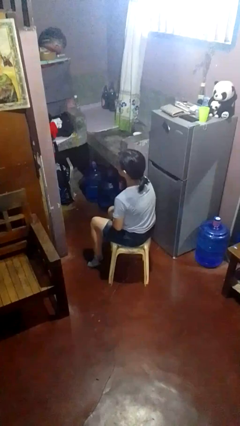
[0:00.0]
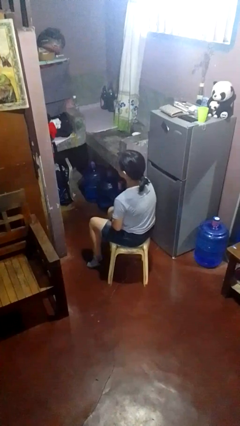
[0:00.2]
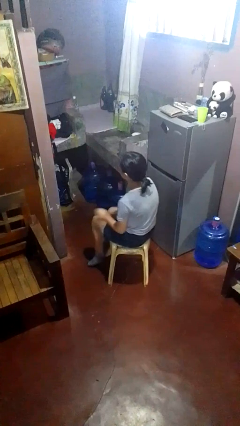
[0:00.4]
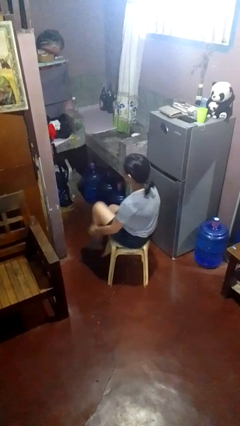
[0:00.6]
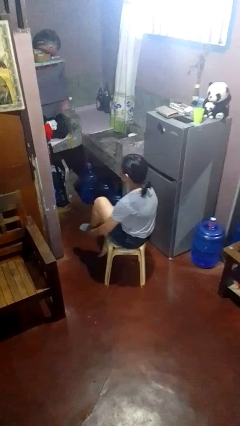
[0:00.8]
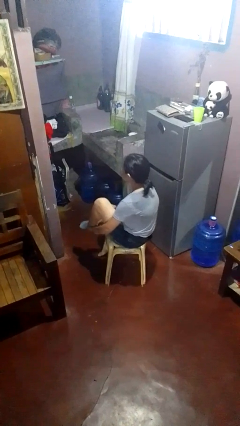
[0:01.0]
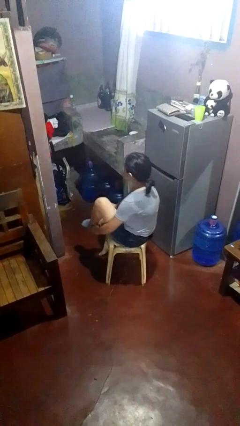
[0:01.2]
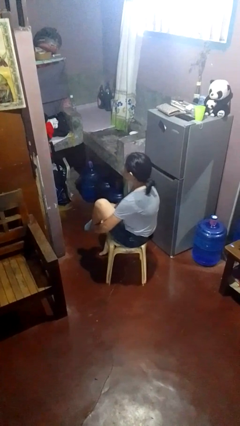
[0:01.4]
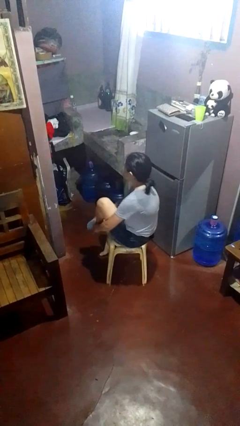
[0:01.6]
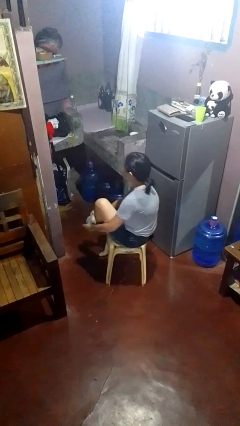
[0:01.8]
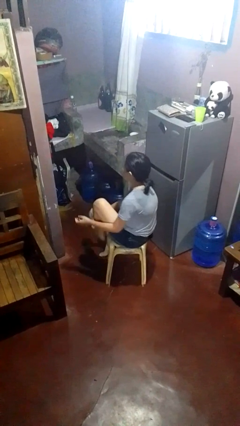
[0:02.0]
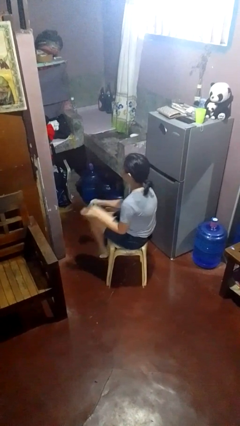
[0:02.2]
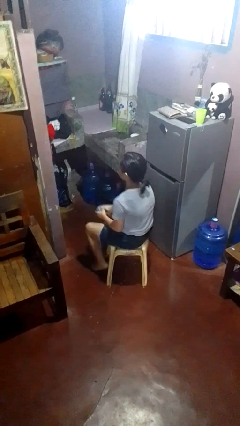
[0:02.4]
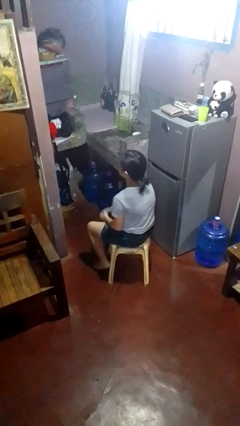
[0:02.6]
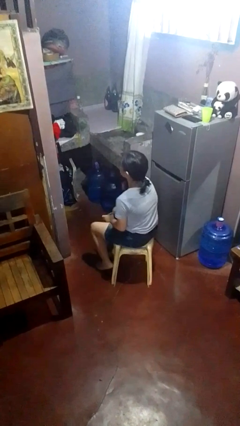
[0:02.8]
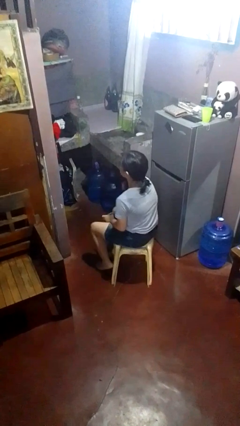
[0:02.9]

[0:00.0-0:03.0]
person takes off socks

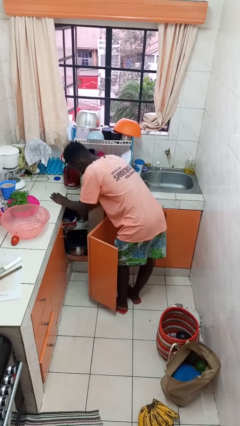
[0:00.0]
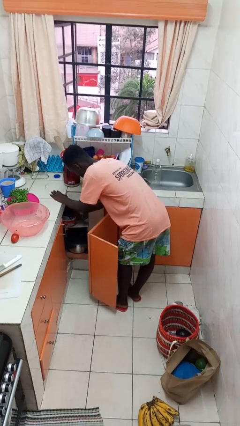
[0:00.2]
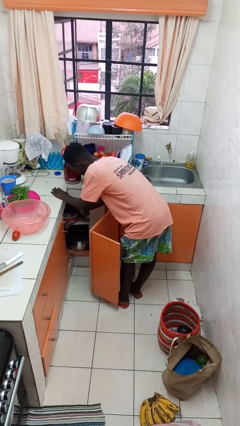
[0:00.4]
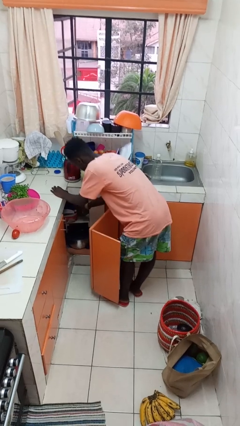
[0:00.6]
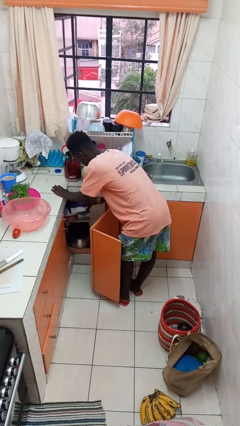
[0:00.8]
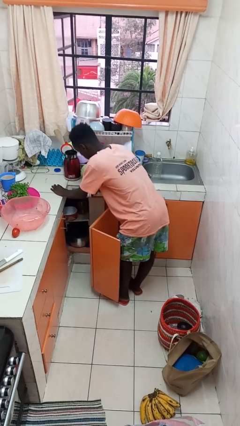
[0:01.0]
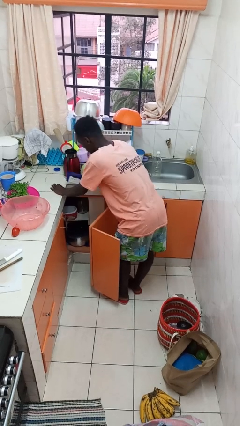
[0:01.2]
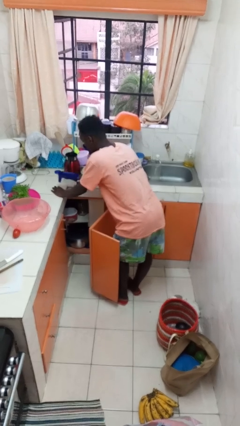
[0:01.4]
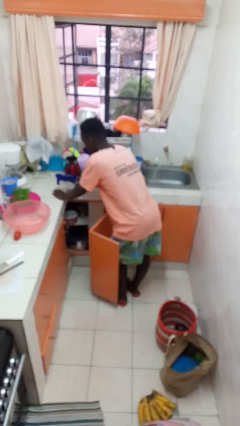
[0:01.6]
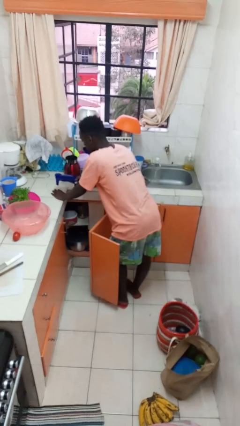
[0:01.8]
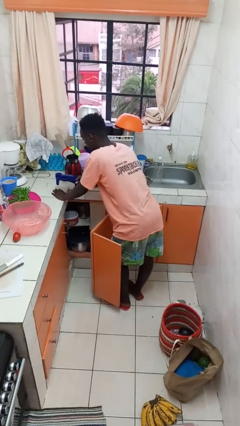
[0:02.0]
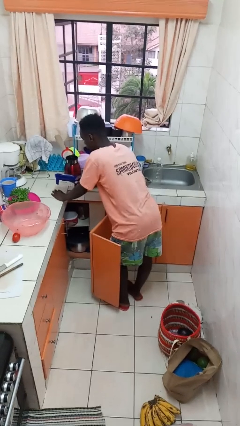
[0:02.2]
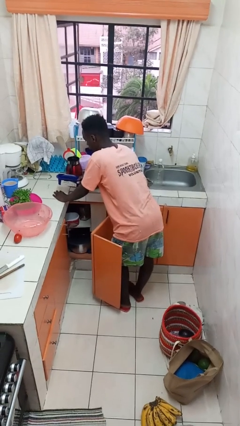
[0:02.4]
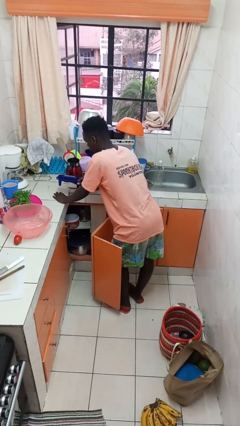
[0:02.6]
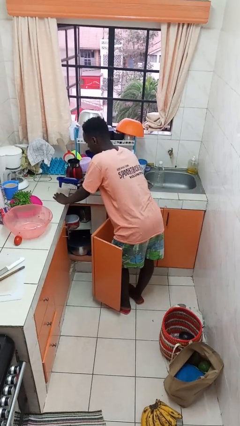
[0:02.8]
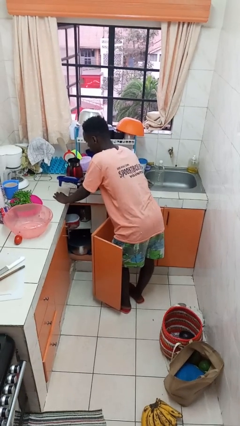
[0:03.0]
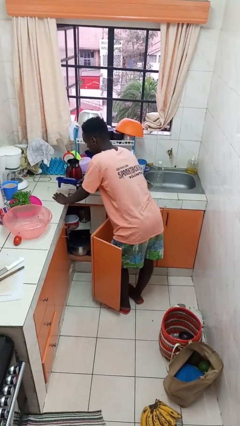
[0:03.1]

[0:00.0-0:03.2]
person takes object from cabinet

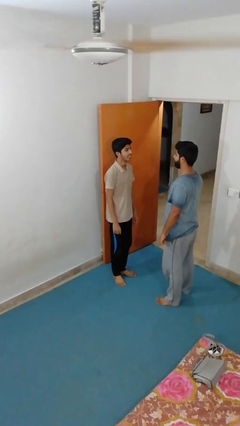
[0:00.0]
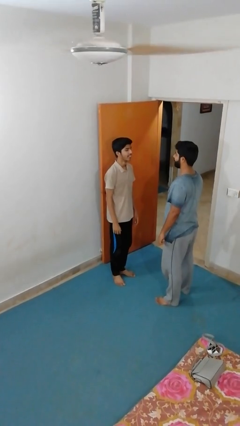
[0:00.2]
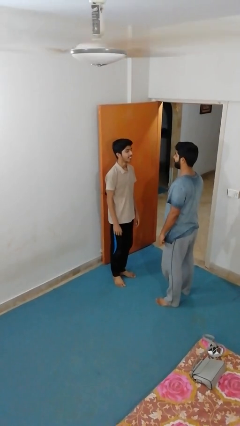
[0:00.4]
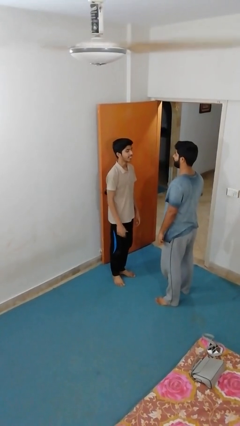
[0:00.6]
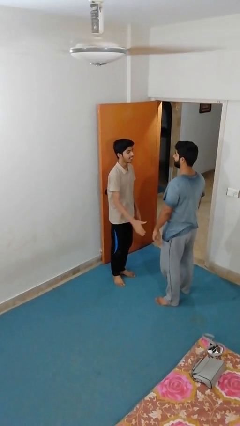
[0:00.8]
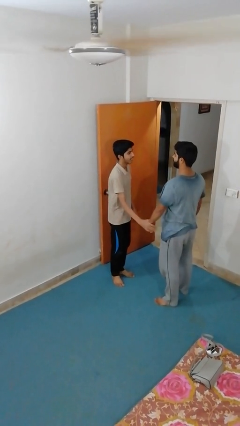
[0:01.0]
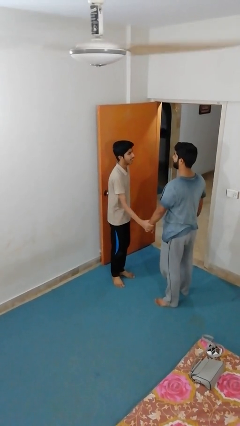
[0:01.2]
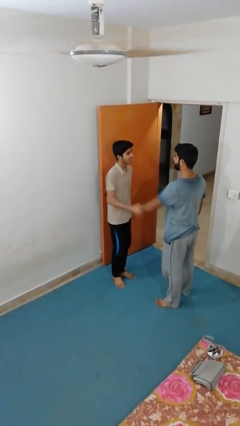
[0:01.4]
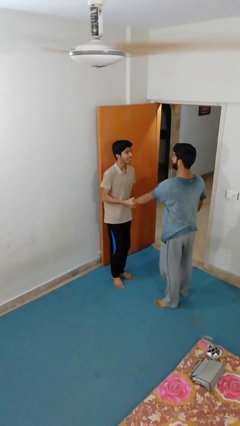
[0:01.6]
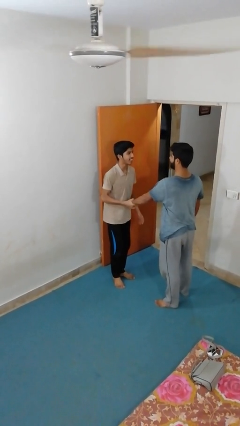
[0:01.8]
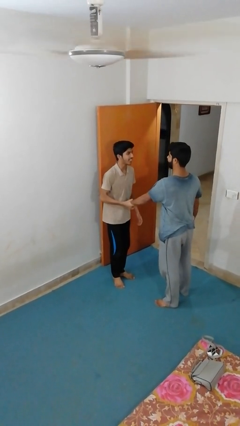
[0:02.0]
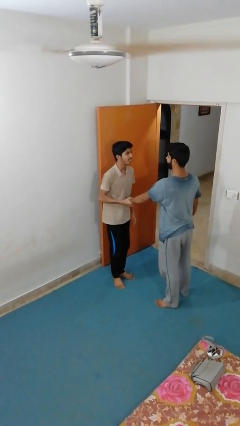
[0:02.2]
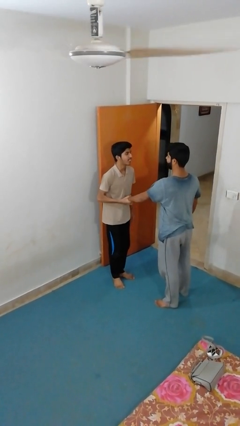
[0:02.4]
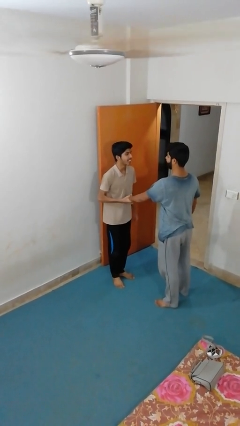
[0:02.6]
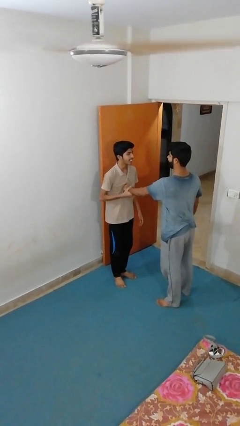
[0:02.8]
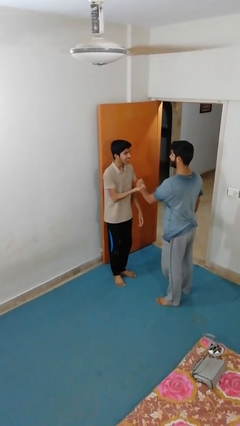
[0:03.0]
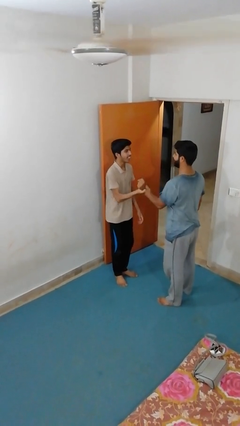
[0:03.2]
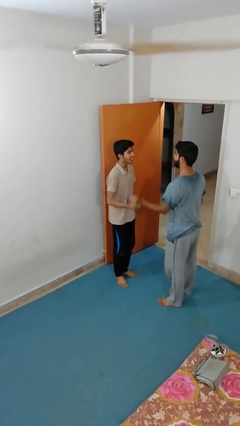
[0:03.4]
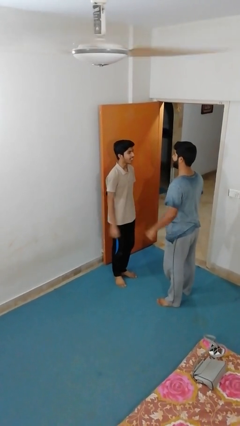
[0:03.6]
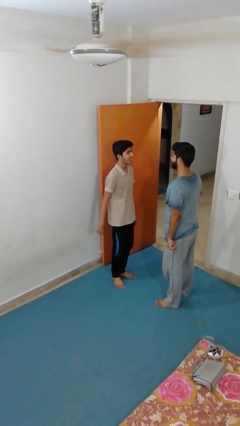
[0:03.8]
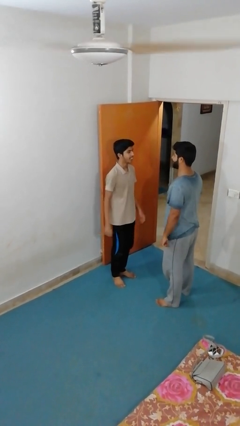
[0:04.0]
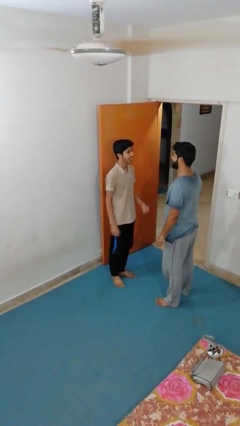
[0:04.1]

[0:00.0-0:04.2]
person grabs person by forearm

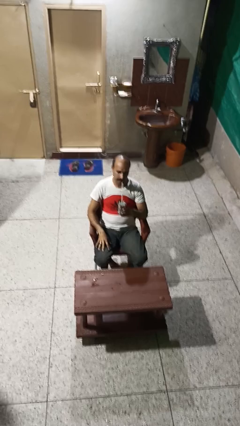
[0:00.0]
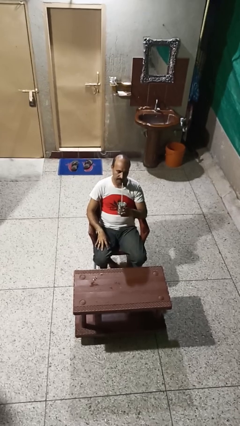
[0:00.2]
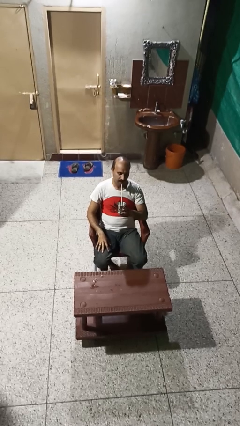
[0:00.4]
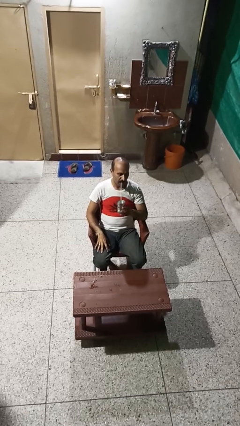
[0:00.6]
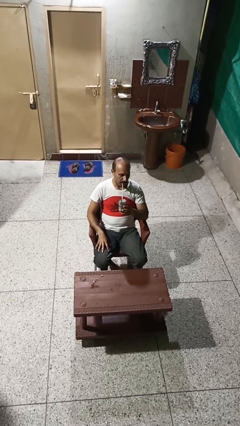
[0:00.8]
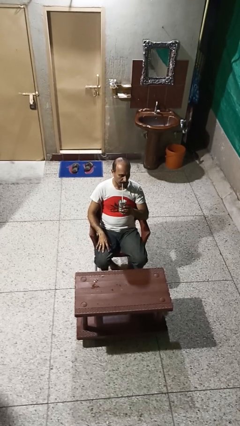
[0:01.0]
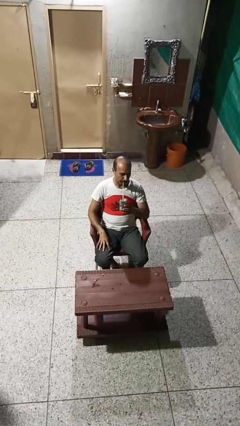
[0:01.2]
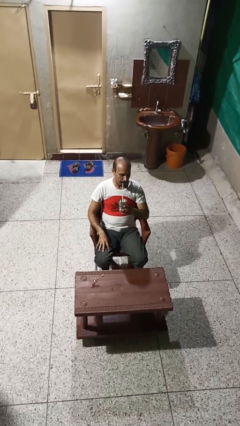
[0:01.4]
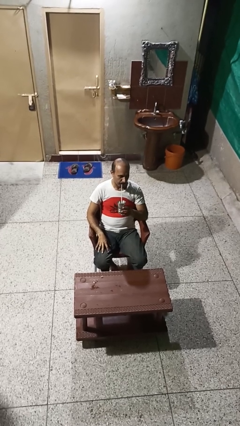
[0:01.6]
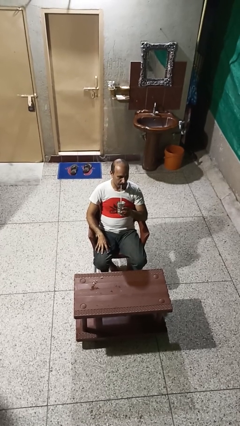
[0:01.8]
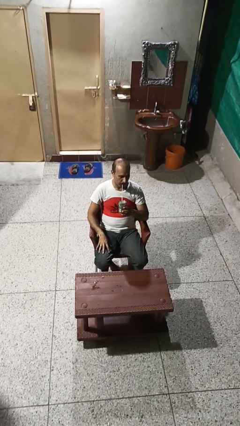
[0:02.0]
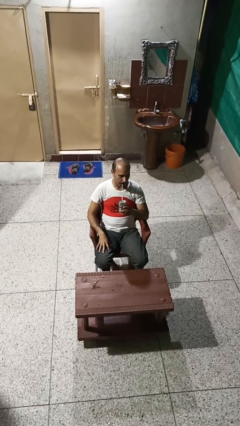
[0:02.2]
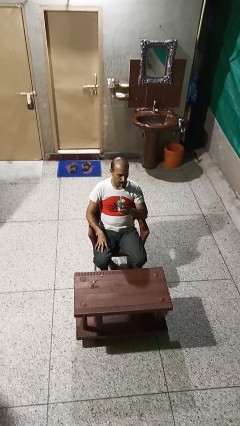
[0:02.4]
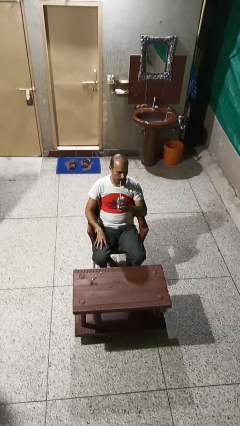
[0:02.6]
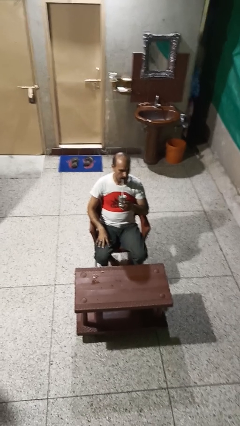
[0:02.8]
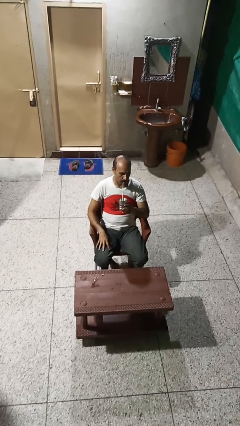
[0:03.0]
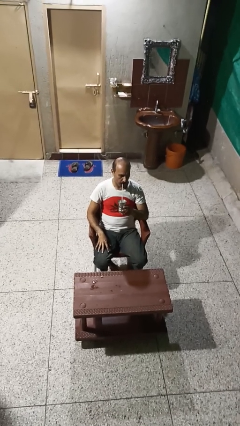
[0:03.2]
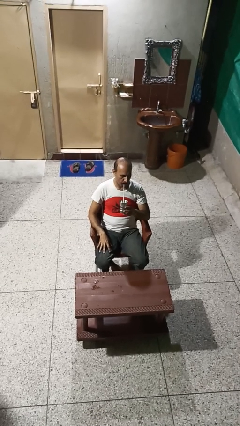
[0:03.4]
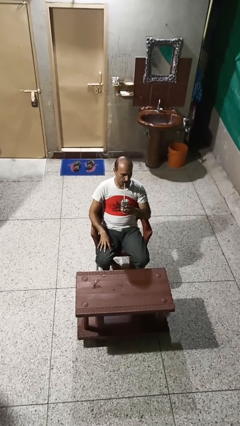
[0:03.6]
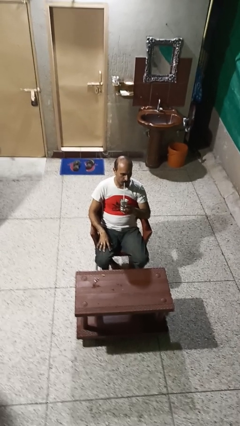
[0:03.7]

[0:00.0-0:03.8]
person drinks from straw

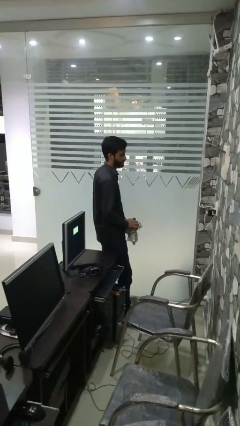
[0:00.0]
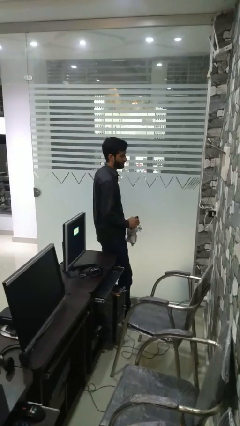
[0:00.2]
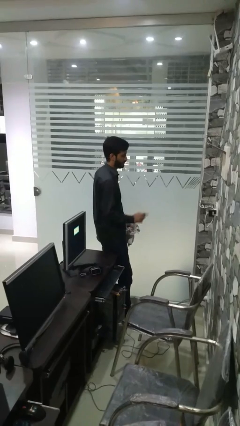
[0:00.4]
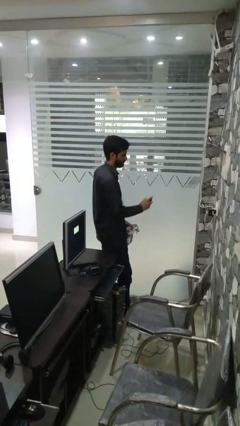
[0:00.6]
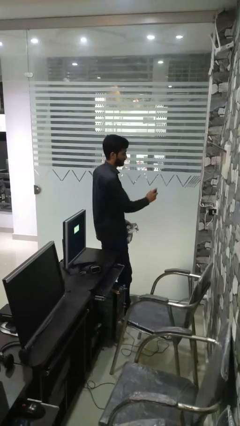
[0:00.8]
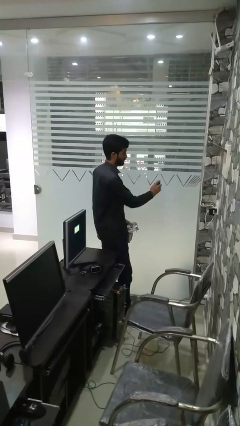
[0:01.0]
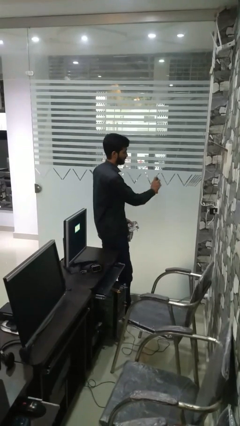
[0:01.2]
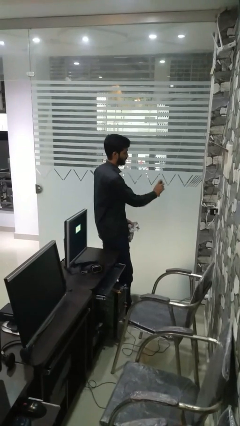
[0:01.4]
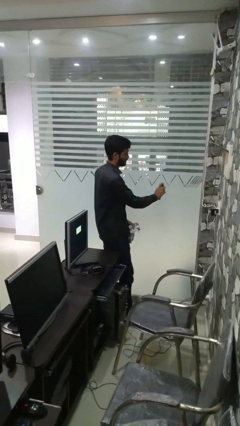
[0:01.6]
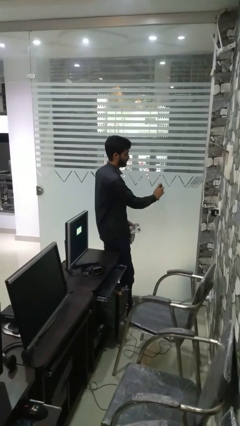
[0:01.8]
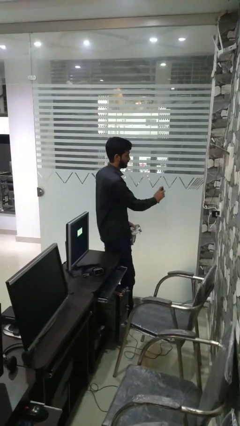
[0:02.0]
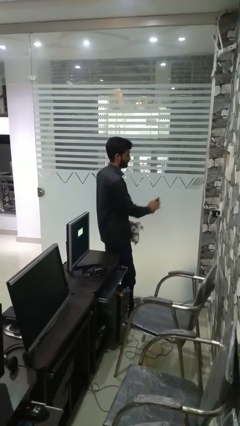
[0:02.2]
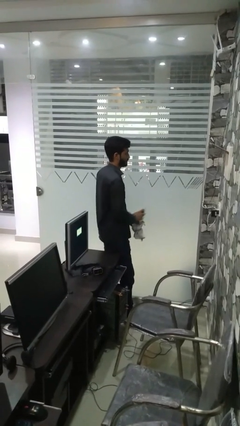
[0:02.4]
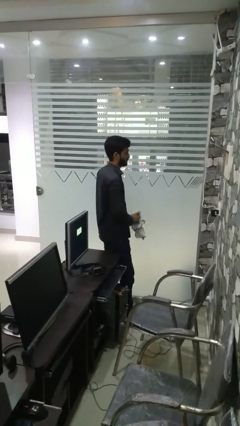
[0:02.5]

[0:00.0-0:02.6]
person sprays from bottle

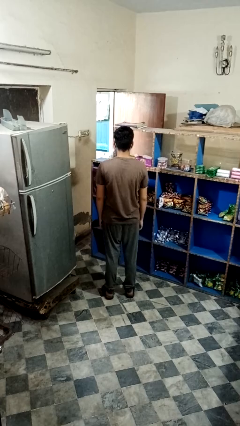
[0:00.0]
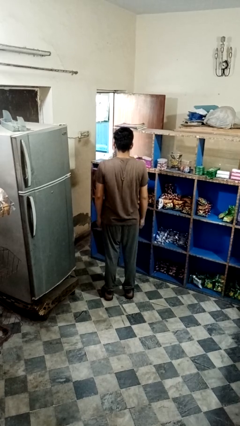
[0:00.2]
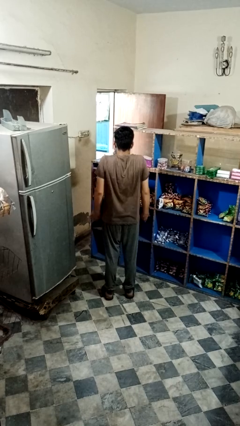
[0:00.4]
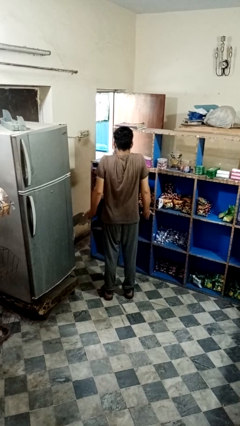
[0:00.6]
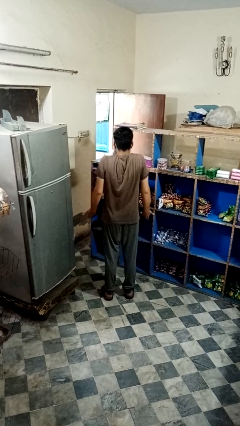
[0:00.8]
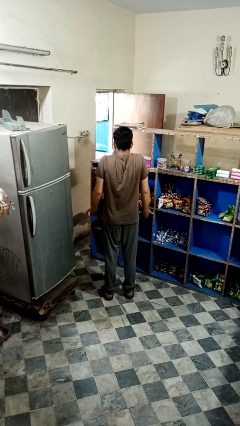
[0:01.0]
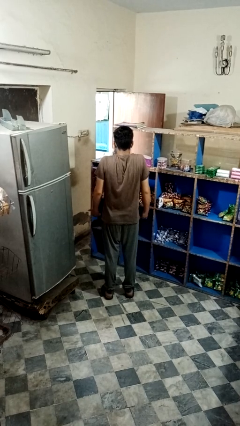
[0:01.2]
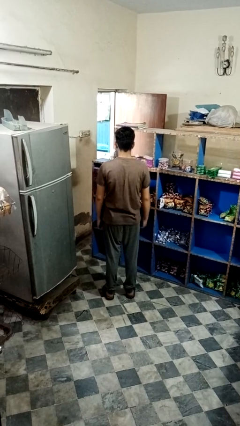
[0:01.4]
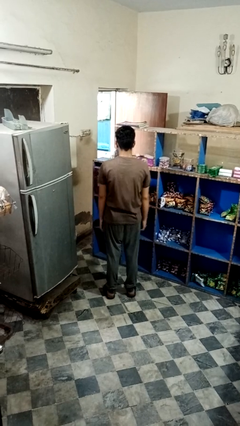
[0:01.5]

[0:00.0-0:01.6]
person shrugs
